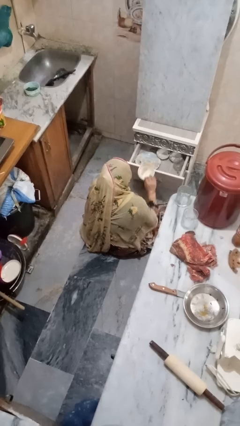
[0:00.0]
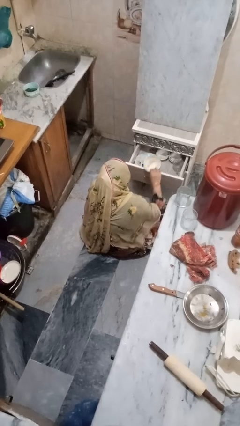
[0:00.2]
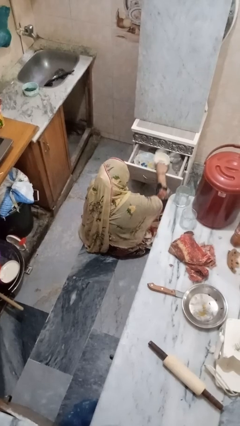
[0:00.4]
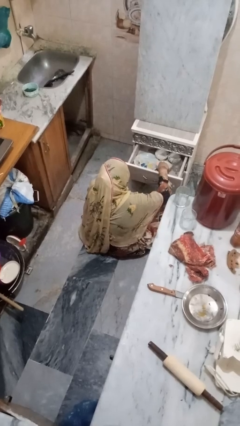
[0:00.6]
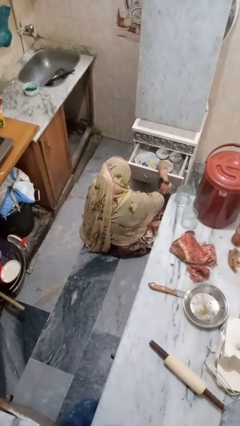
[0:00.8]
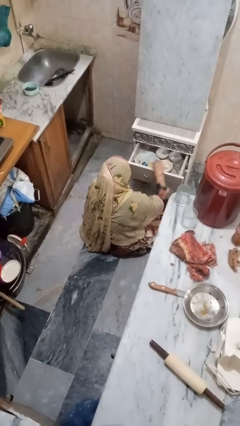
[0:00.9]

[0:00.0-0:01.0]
person puts object into kitchen drawer

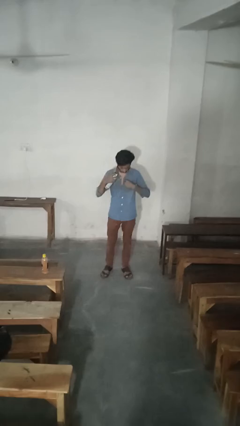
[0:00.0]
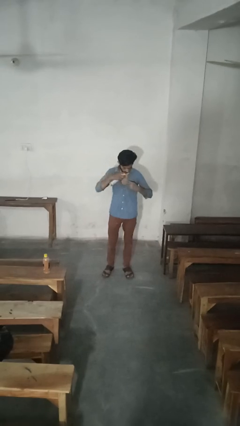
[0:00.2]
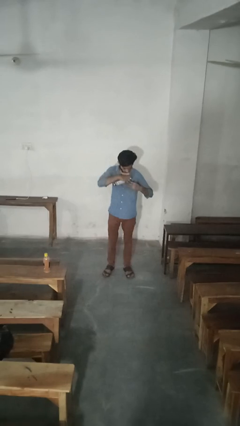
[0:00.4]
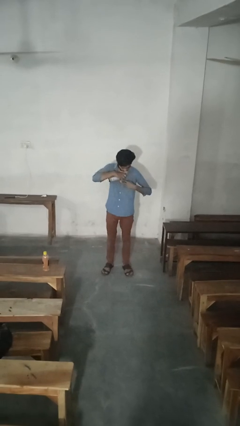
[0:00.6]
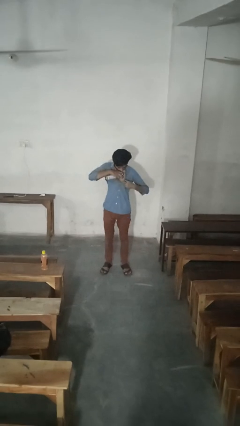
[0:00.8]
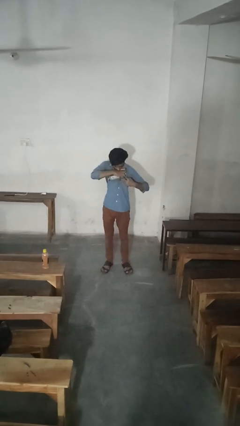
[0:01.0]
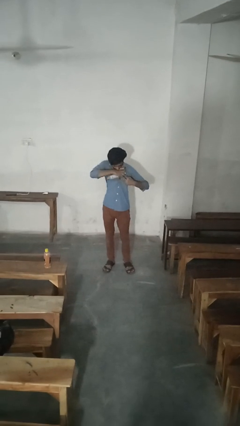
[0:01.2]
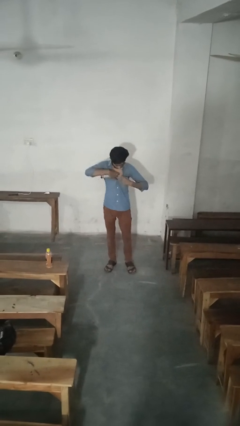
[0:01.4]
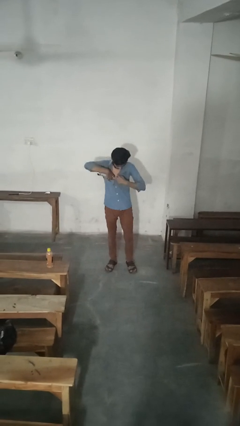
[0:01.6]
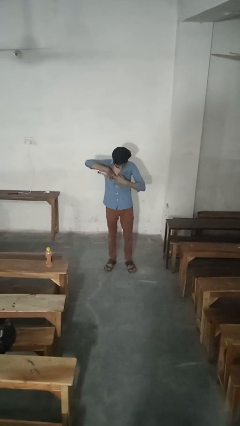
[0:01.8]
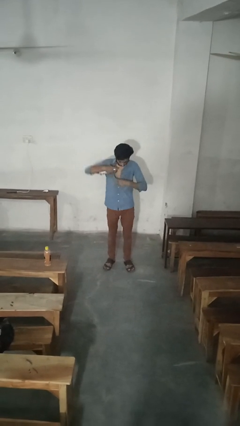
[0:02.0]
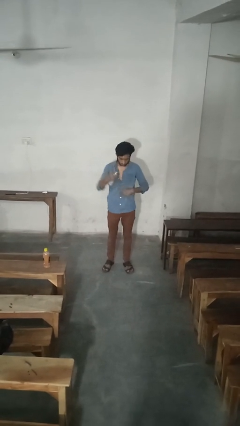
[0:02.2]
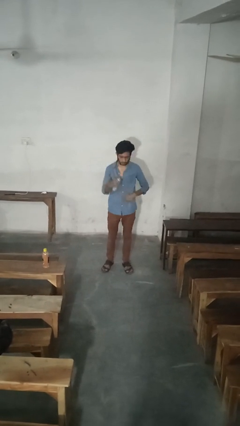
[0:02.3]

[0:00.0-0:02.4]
person applies deodorant

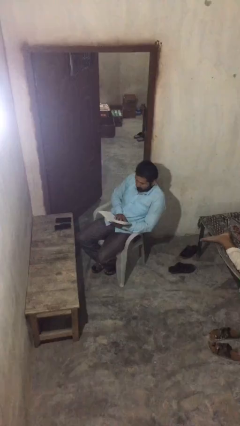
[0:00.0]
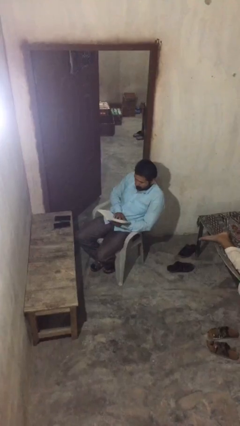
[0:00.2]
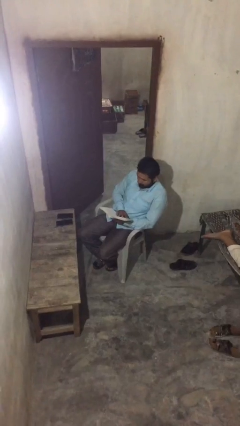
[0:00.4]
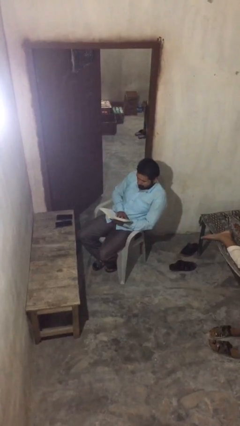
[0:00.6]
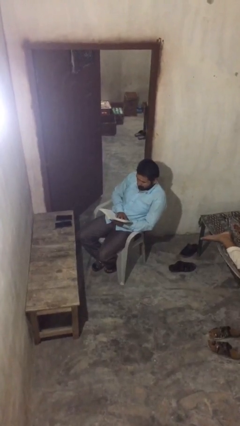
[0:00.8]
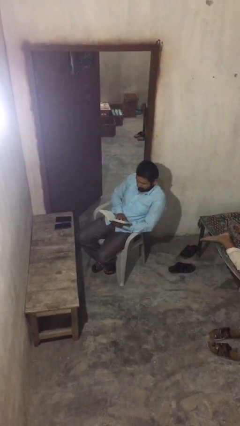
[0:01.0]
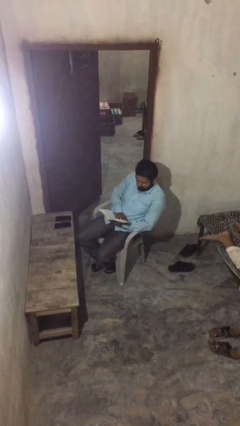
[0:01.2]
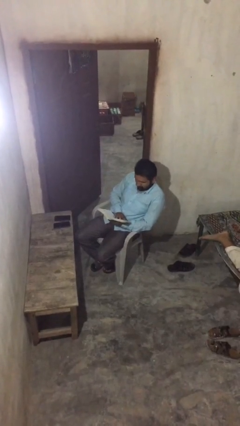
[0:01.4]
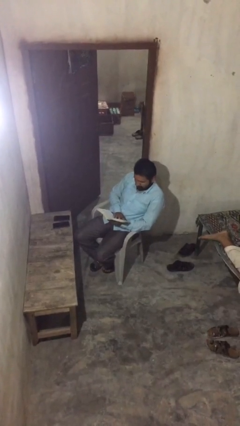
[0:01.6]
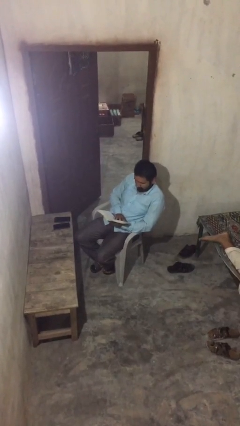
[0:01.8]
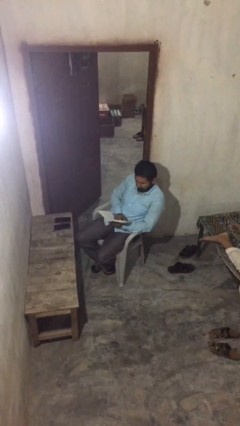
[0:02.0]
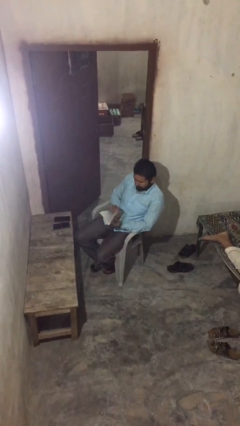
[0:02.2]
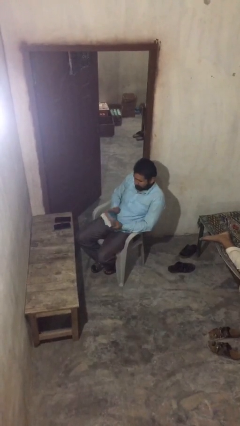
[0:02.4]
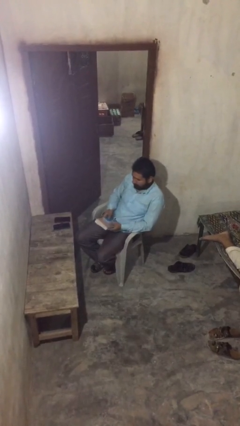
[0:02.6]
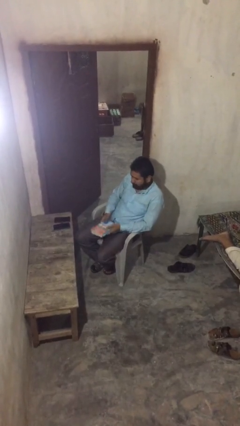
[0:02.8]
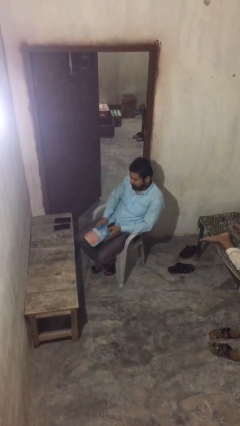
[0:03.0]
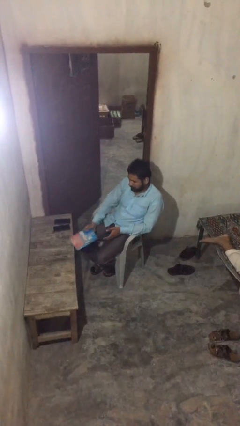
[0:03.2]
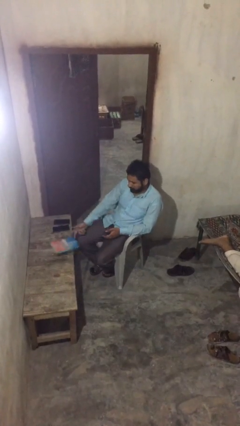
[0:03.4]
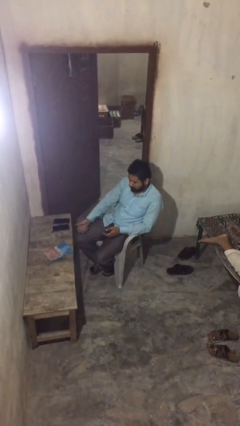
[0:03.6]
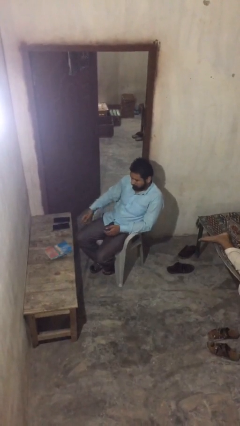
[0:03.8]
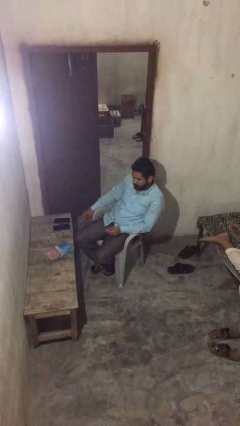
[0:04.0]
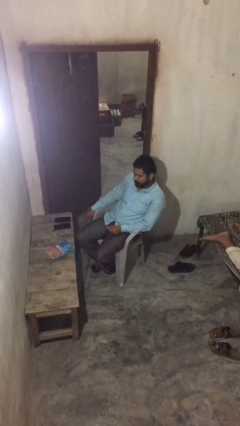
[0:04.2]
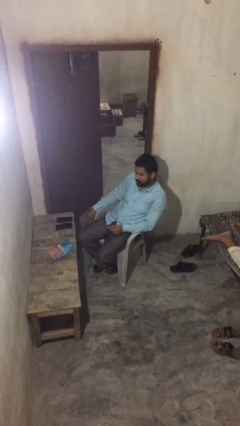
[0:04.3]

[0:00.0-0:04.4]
person puts down object on table

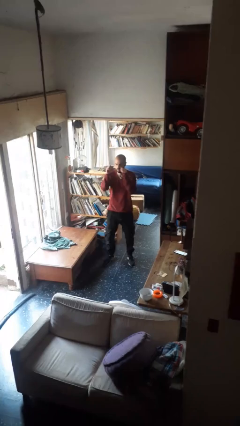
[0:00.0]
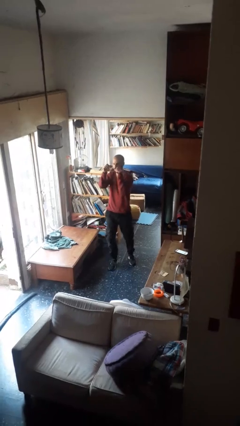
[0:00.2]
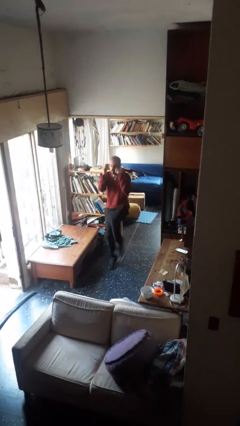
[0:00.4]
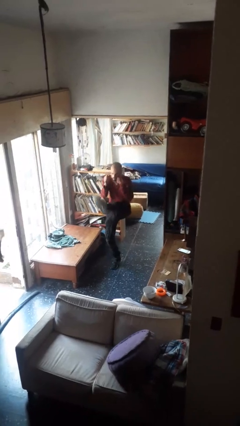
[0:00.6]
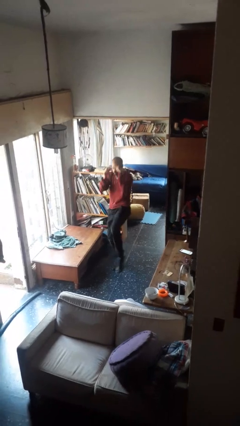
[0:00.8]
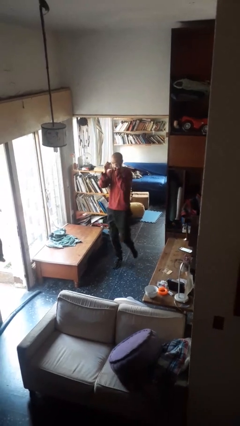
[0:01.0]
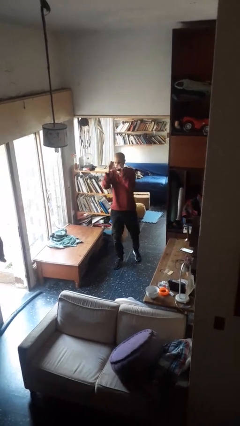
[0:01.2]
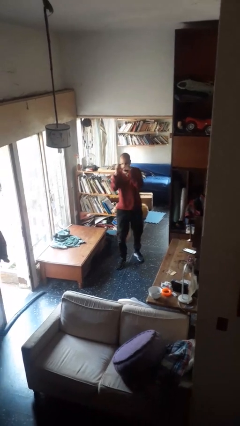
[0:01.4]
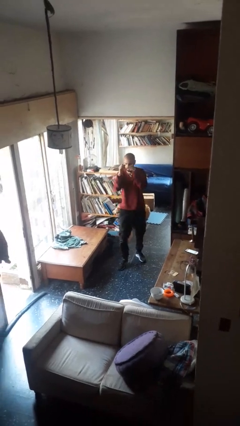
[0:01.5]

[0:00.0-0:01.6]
person karate kicks

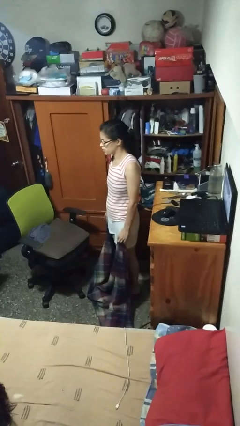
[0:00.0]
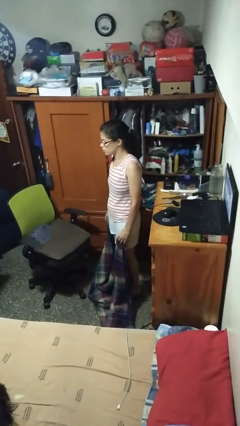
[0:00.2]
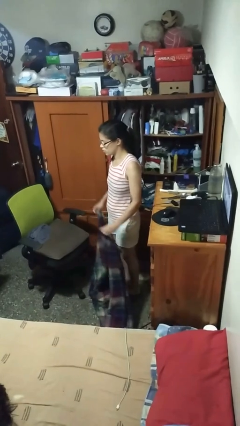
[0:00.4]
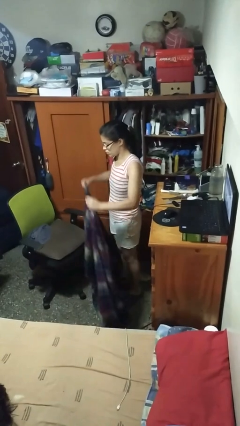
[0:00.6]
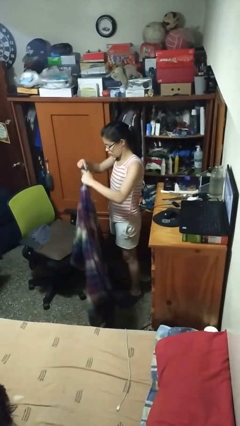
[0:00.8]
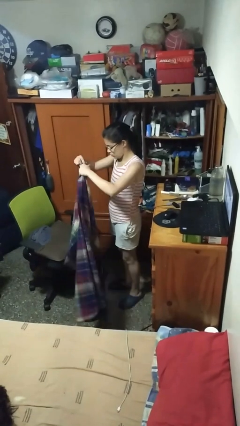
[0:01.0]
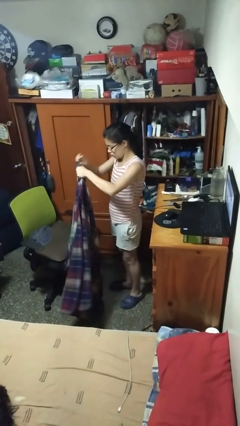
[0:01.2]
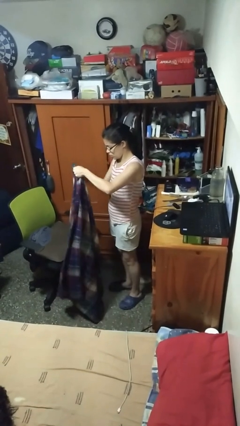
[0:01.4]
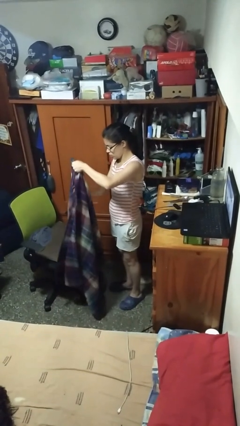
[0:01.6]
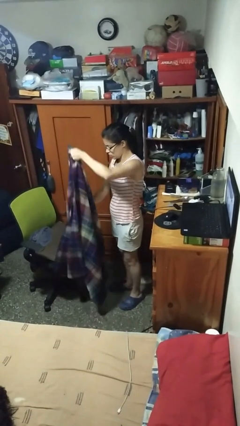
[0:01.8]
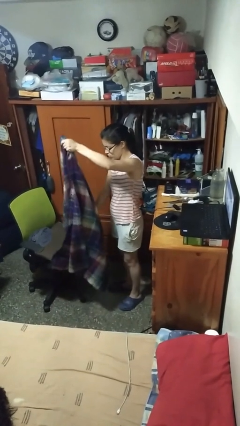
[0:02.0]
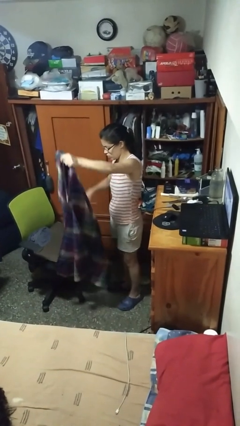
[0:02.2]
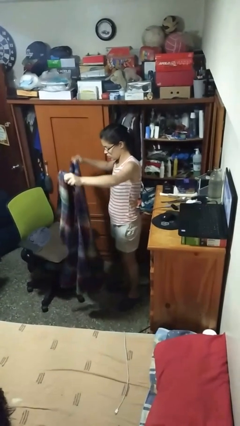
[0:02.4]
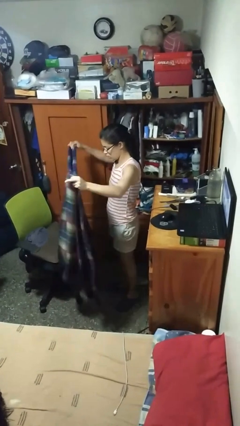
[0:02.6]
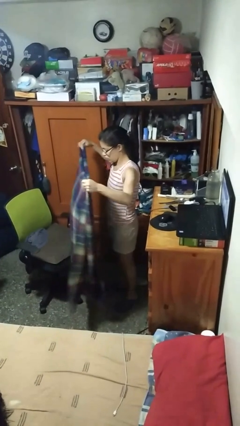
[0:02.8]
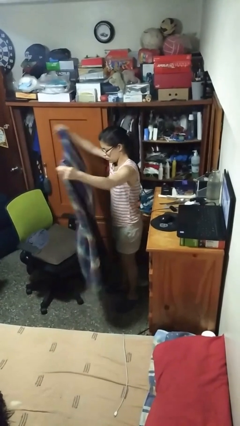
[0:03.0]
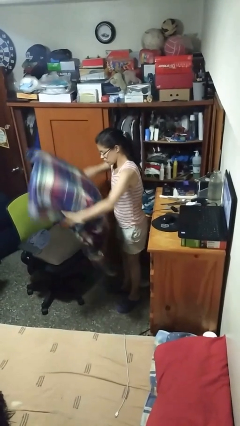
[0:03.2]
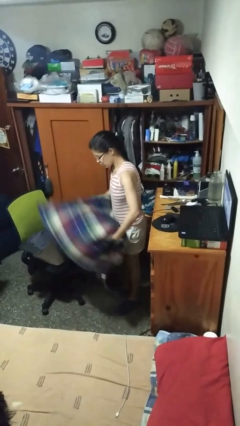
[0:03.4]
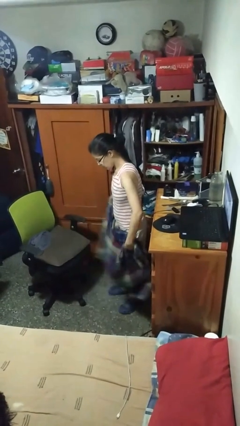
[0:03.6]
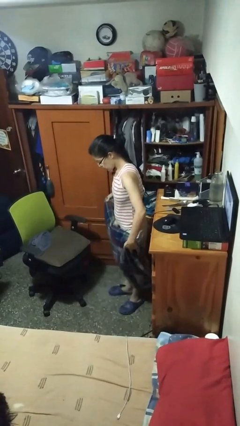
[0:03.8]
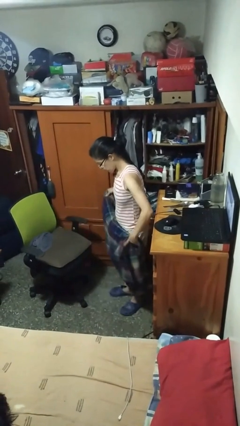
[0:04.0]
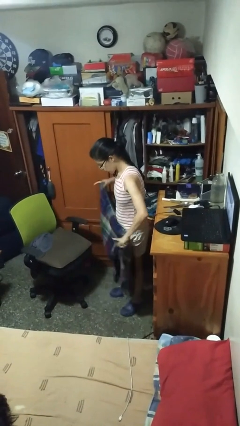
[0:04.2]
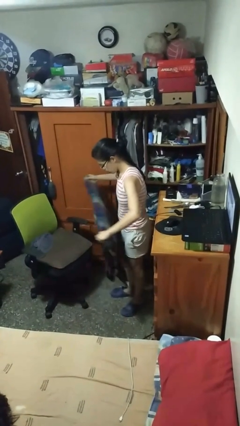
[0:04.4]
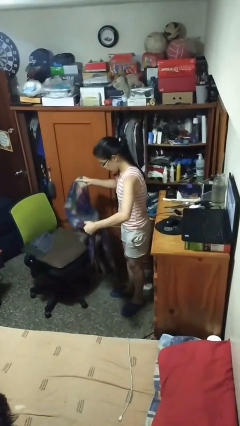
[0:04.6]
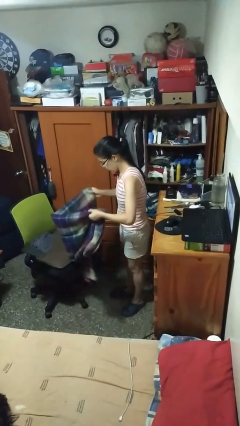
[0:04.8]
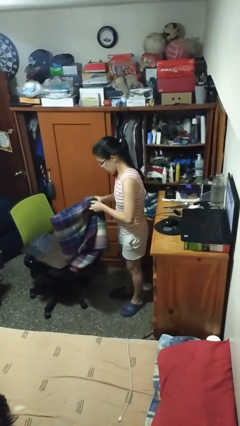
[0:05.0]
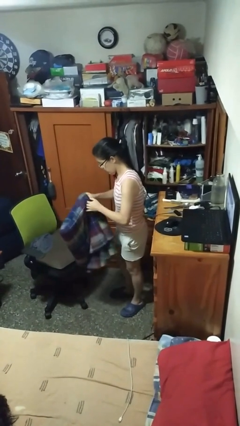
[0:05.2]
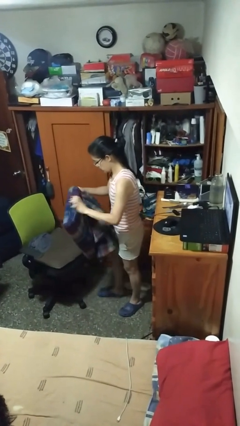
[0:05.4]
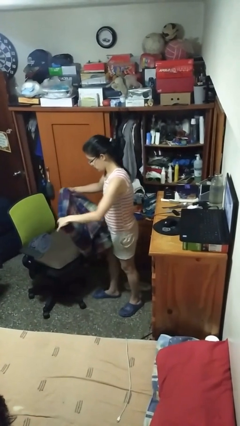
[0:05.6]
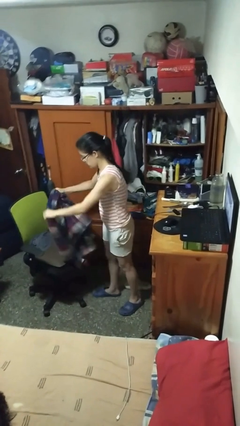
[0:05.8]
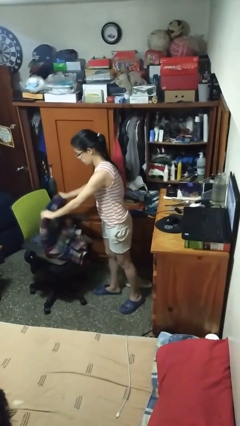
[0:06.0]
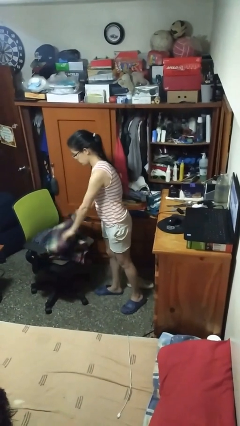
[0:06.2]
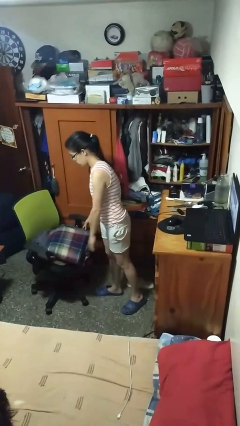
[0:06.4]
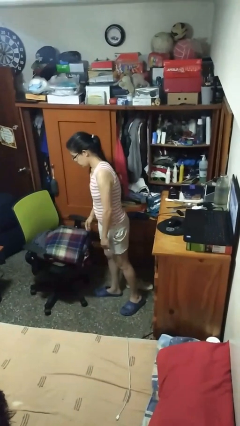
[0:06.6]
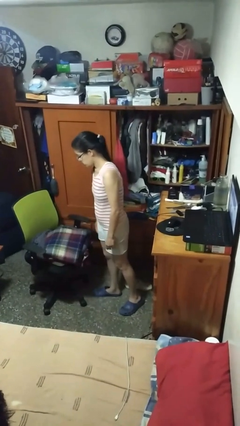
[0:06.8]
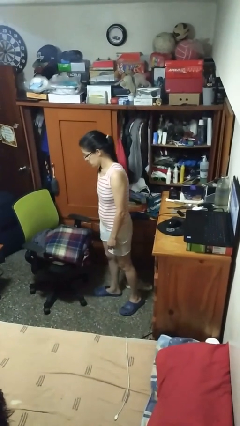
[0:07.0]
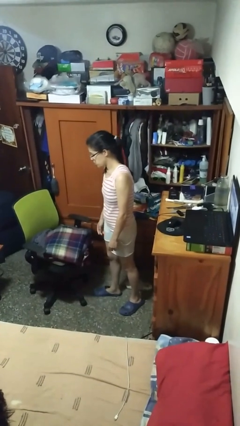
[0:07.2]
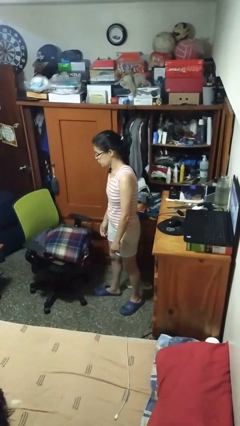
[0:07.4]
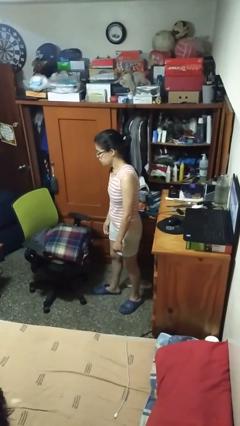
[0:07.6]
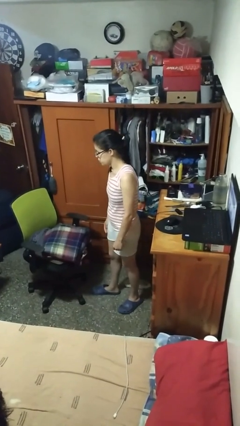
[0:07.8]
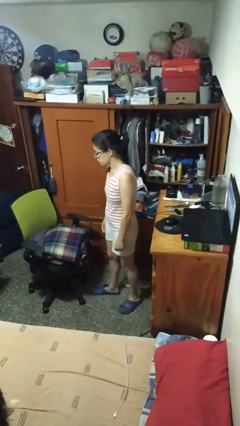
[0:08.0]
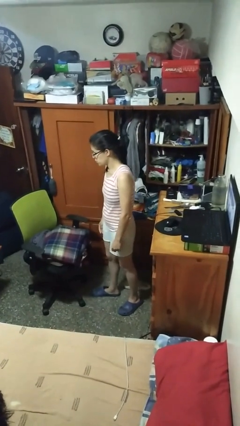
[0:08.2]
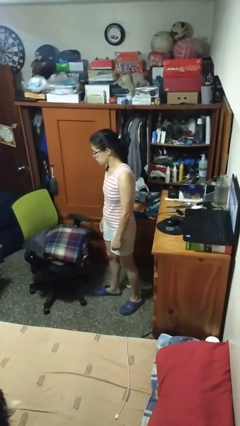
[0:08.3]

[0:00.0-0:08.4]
person folds blanket
